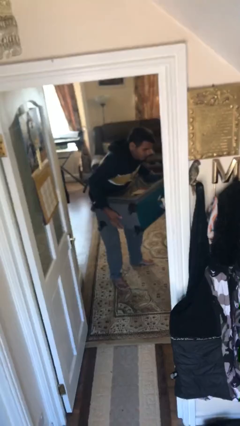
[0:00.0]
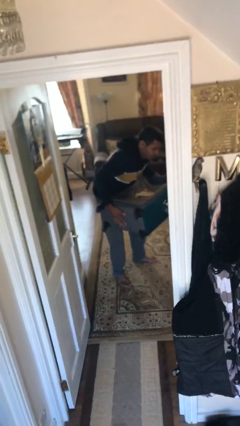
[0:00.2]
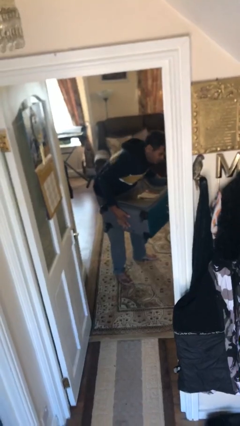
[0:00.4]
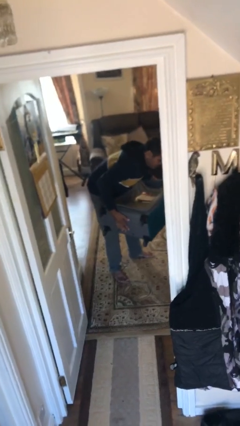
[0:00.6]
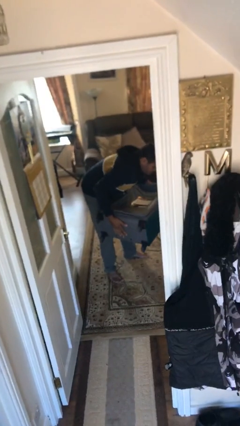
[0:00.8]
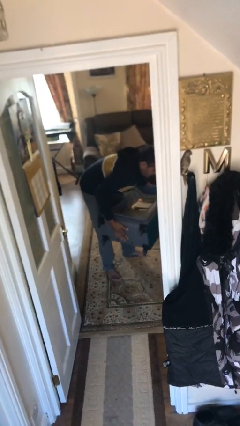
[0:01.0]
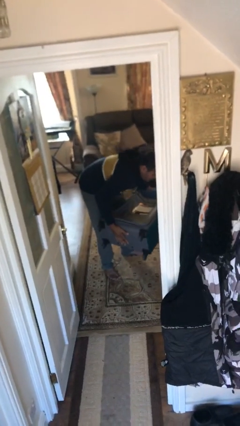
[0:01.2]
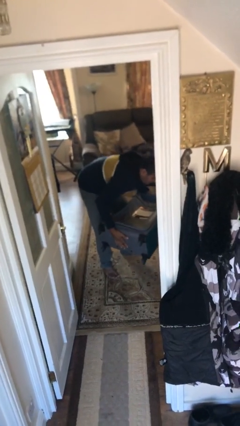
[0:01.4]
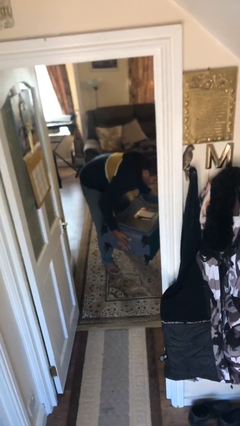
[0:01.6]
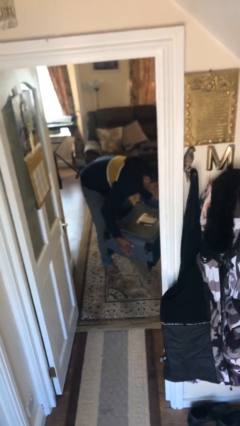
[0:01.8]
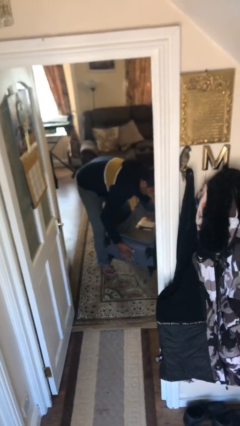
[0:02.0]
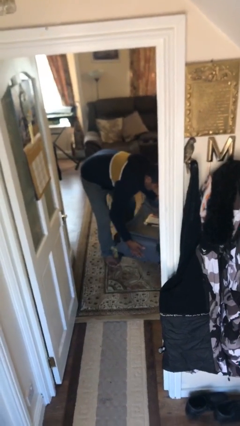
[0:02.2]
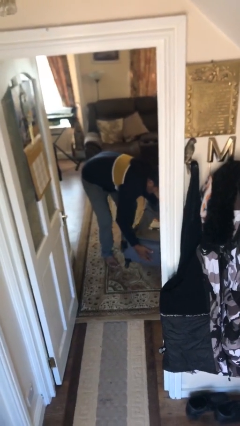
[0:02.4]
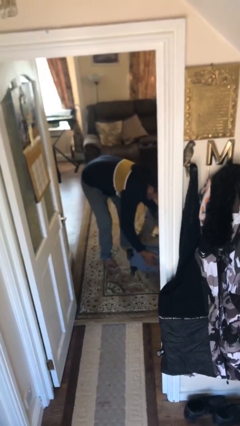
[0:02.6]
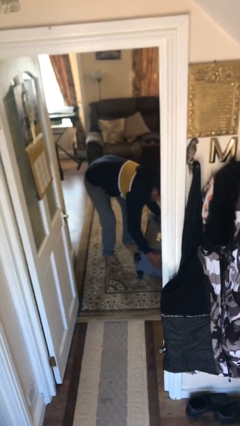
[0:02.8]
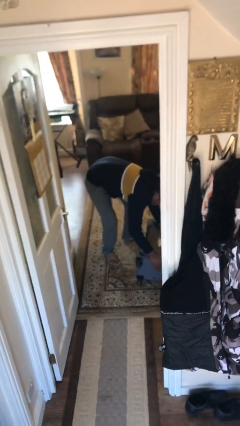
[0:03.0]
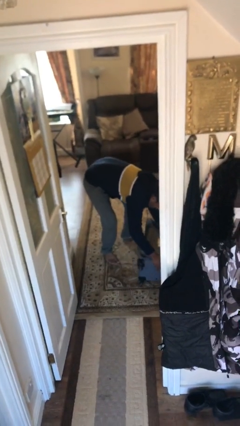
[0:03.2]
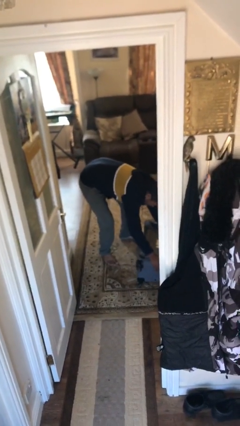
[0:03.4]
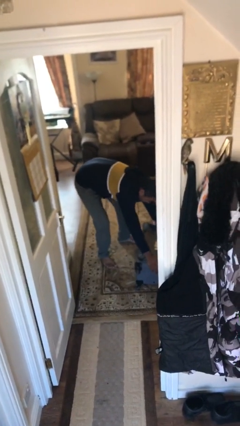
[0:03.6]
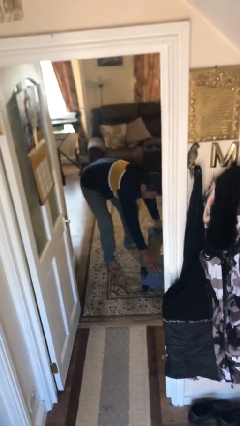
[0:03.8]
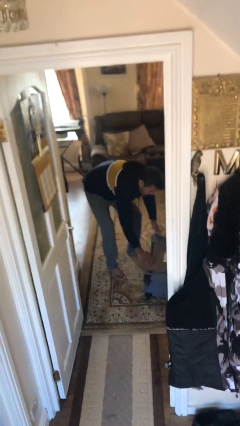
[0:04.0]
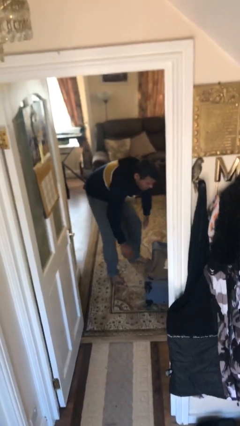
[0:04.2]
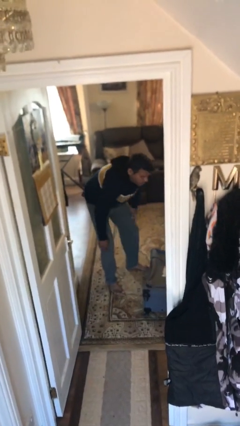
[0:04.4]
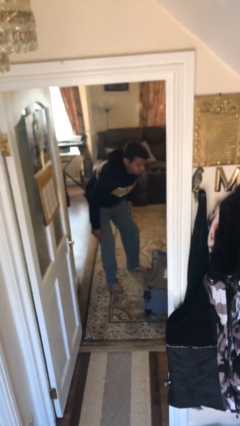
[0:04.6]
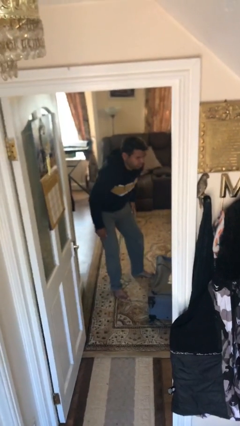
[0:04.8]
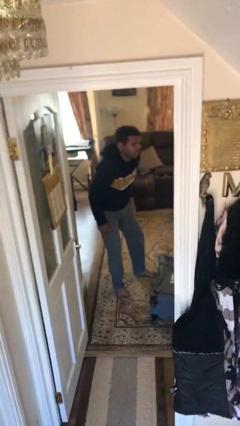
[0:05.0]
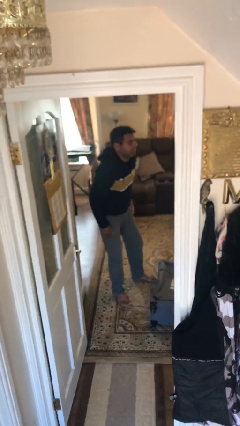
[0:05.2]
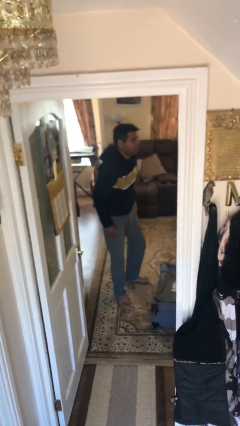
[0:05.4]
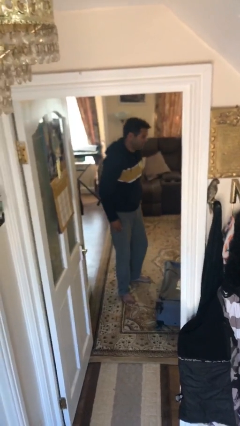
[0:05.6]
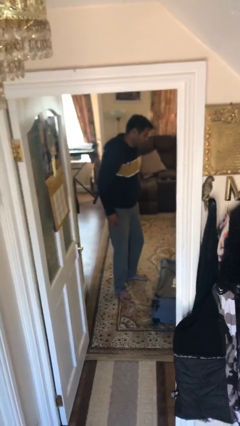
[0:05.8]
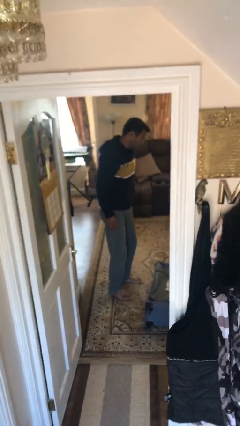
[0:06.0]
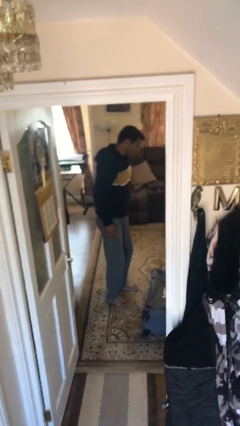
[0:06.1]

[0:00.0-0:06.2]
person puts down object on floor

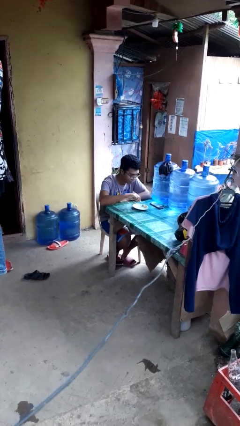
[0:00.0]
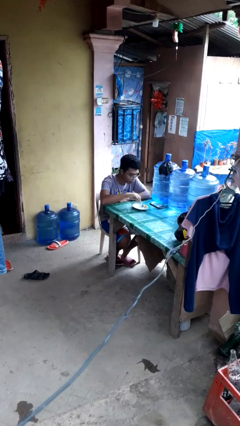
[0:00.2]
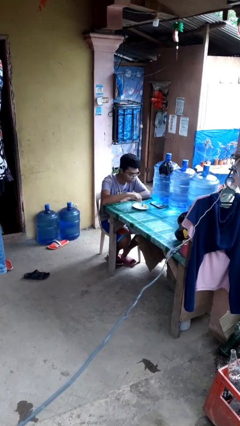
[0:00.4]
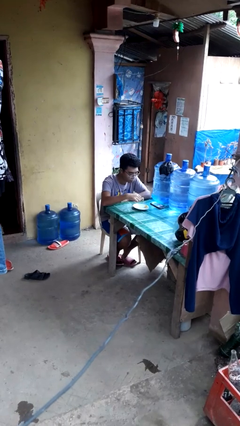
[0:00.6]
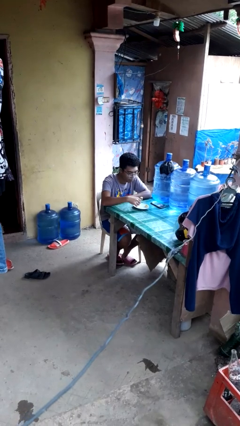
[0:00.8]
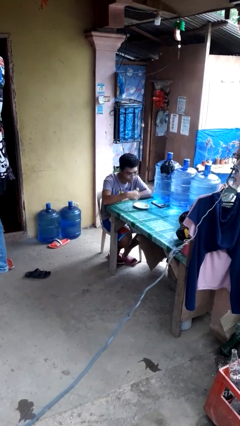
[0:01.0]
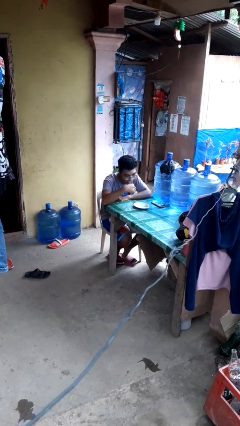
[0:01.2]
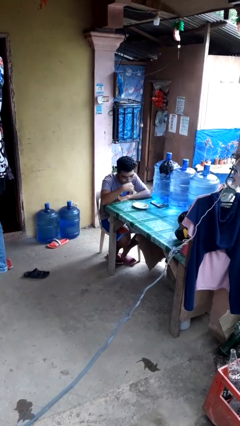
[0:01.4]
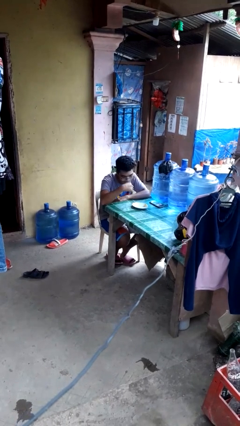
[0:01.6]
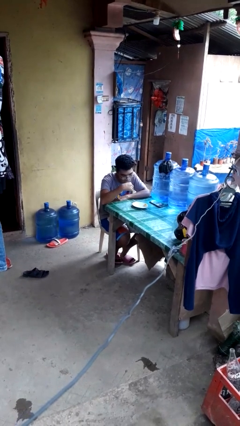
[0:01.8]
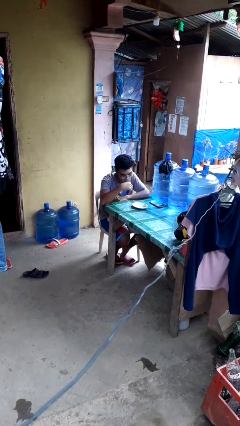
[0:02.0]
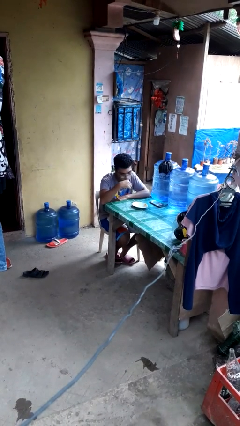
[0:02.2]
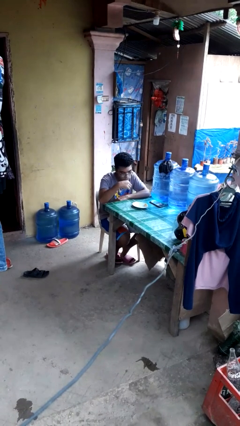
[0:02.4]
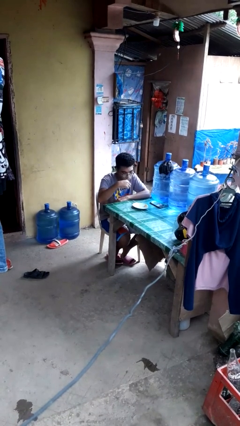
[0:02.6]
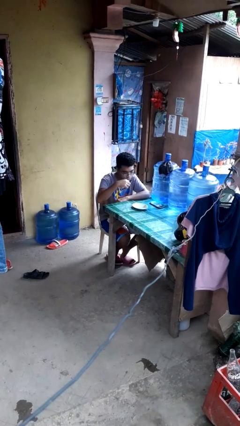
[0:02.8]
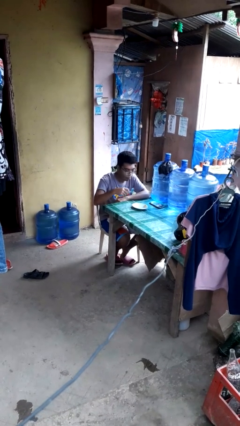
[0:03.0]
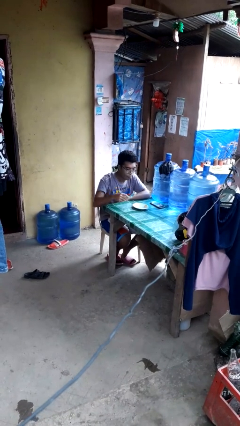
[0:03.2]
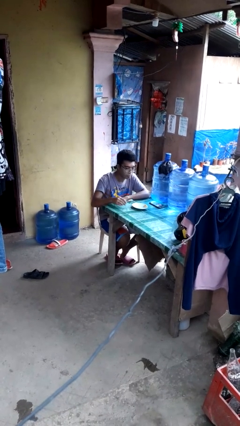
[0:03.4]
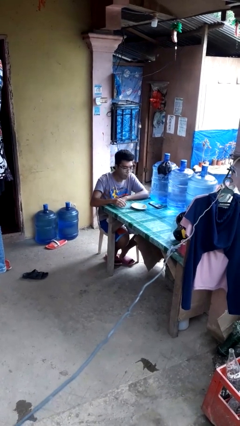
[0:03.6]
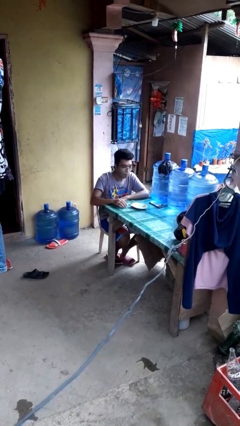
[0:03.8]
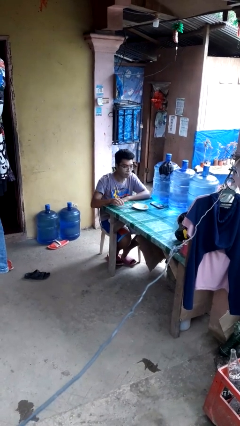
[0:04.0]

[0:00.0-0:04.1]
person eats with utensil

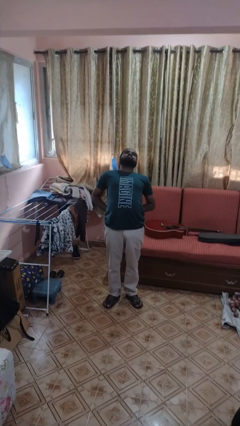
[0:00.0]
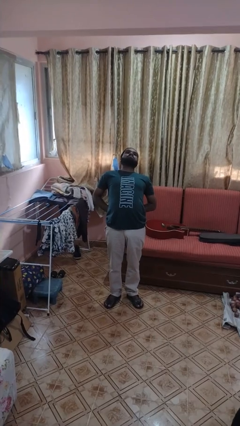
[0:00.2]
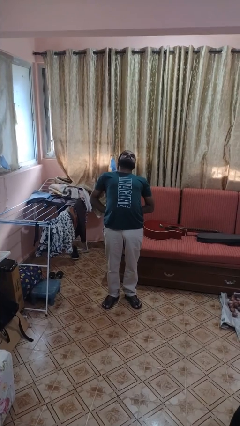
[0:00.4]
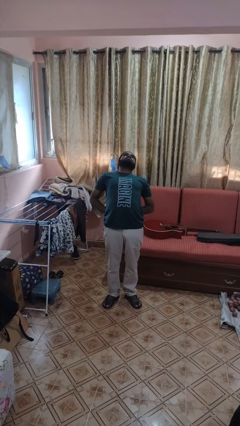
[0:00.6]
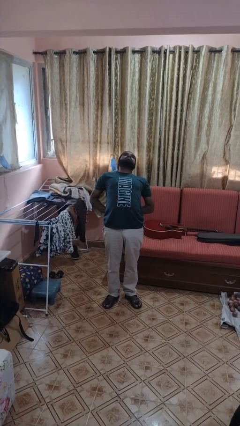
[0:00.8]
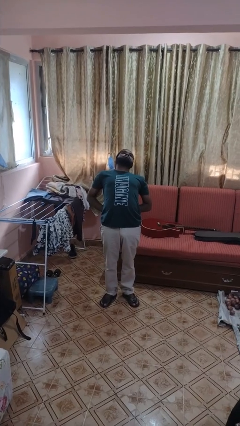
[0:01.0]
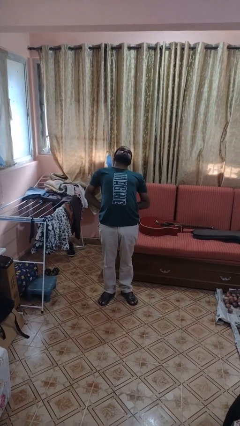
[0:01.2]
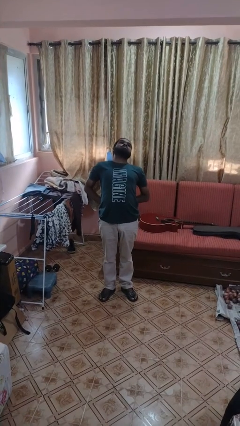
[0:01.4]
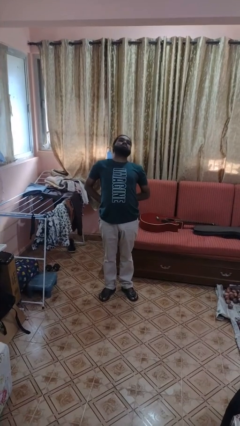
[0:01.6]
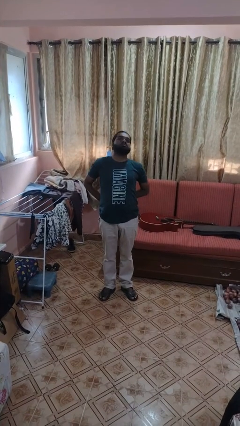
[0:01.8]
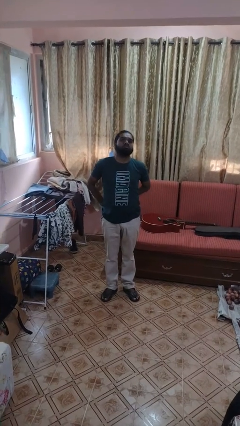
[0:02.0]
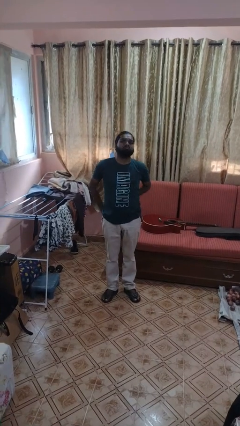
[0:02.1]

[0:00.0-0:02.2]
person stretches back

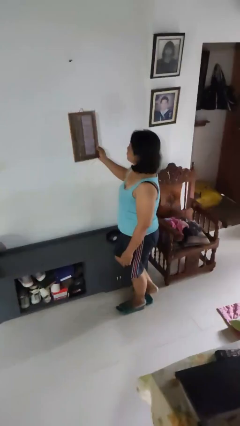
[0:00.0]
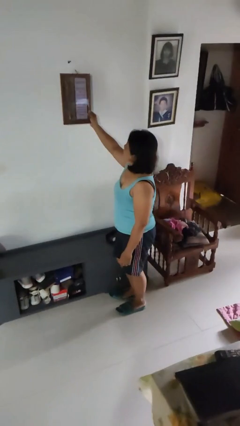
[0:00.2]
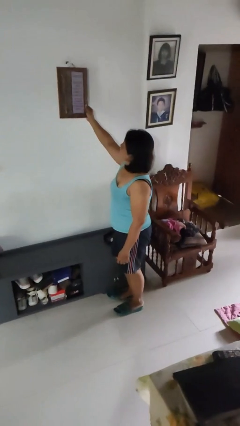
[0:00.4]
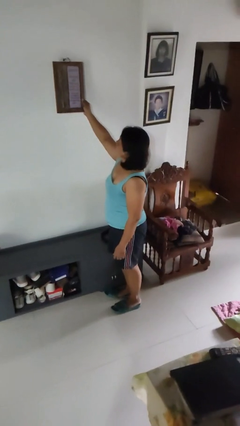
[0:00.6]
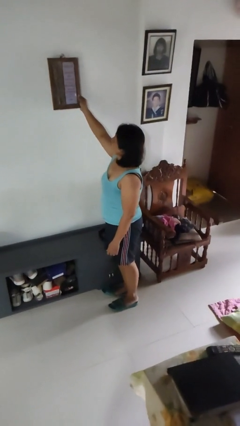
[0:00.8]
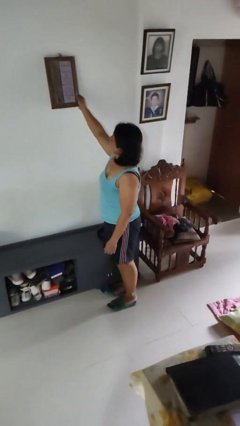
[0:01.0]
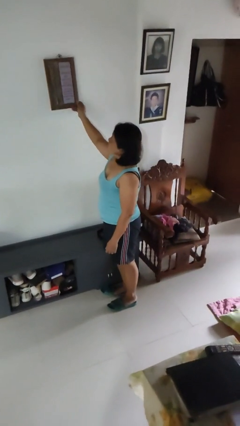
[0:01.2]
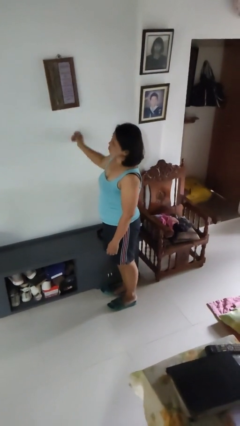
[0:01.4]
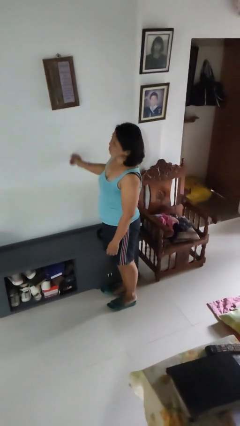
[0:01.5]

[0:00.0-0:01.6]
person puts up picture frame

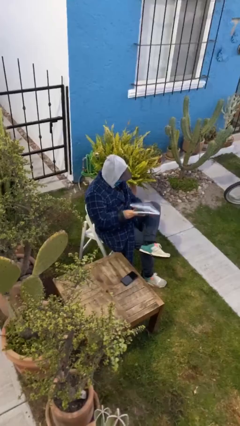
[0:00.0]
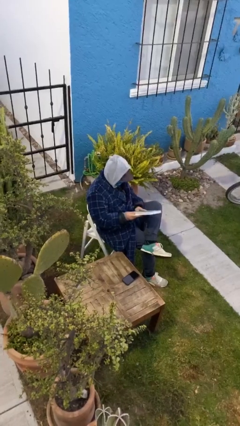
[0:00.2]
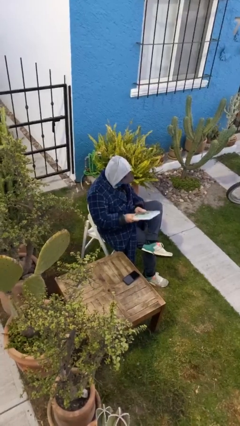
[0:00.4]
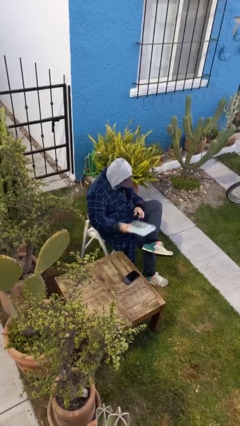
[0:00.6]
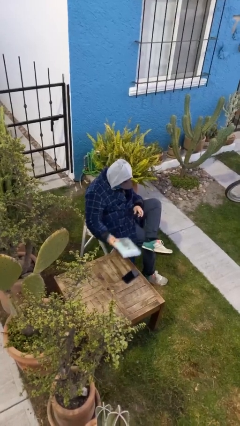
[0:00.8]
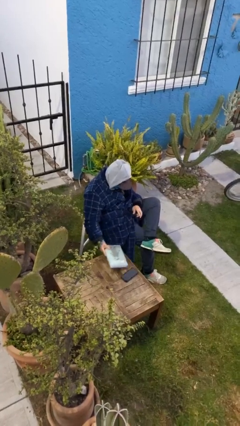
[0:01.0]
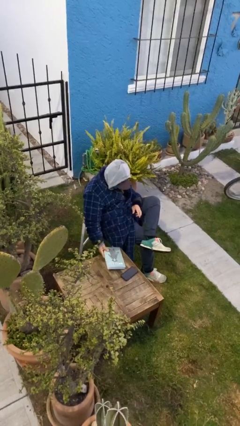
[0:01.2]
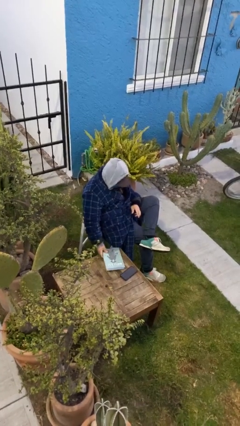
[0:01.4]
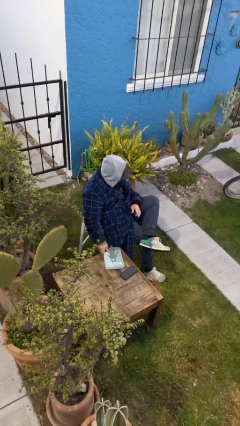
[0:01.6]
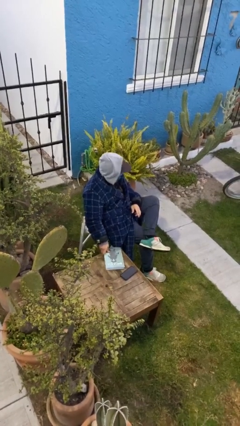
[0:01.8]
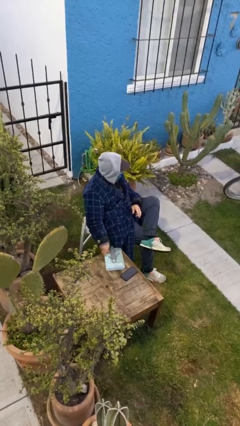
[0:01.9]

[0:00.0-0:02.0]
person puts down object on table

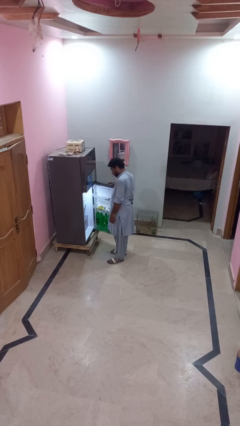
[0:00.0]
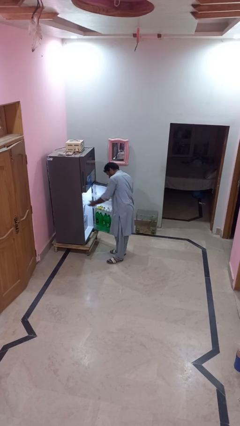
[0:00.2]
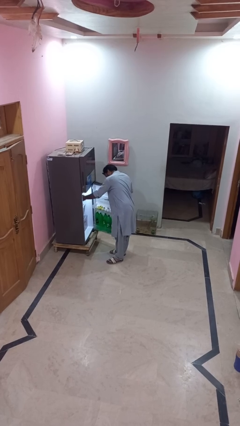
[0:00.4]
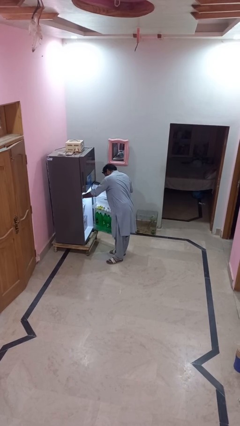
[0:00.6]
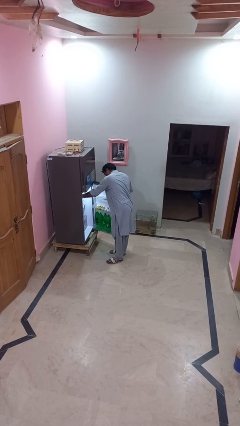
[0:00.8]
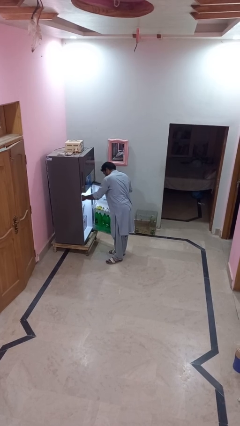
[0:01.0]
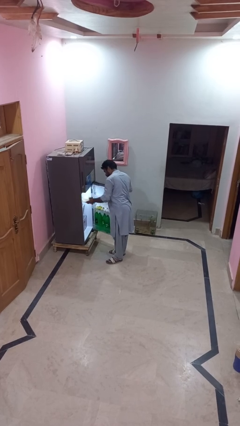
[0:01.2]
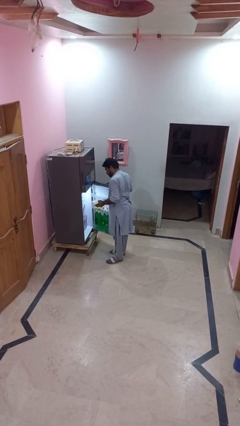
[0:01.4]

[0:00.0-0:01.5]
person takes object from refrigerator
